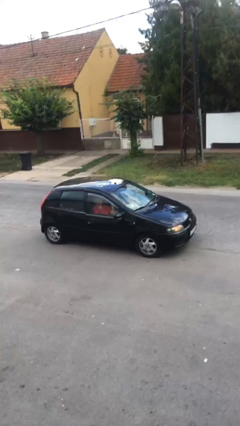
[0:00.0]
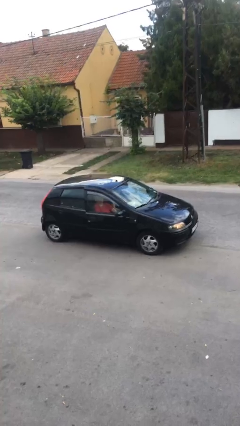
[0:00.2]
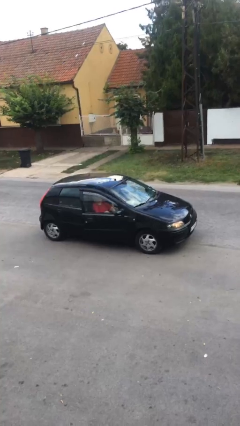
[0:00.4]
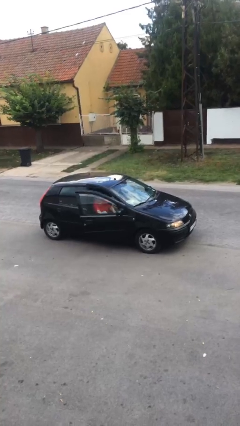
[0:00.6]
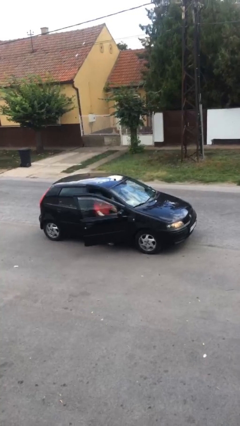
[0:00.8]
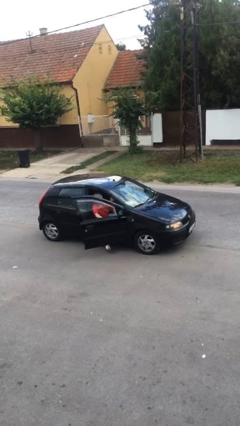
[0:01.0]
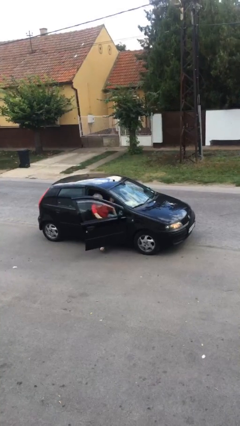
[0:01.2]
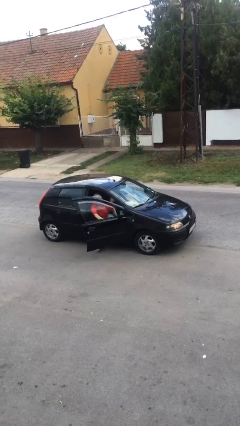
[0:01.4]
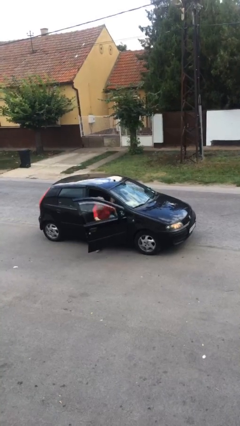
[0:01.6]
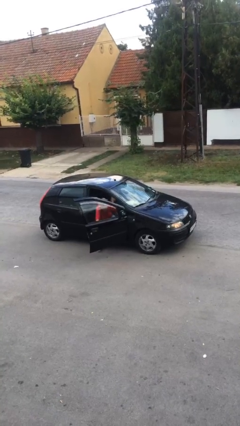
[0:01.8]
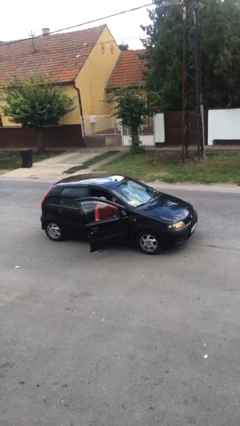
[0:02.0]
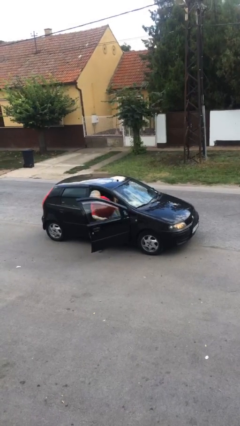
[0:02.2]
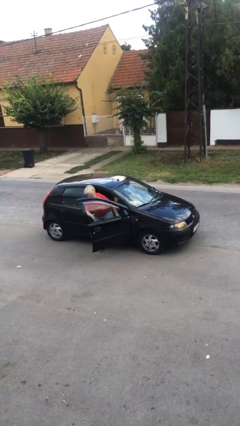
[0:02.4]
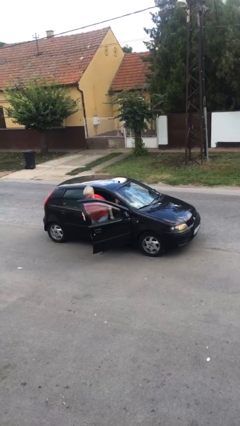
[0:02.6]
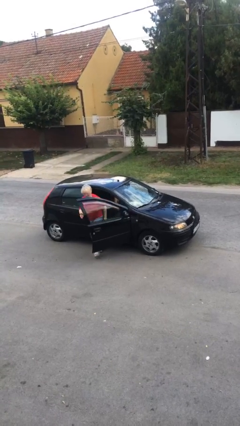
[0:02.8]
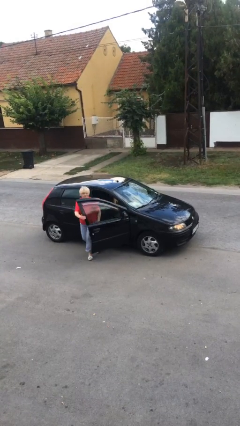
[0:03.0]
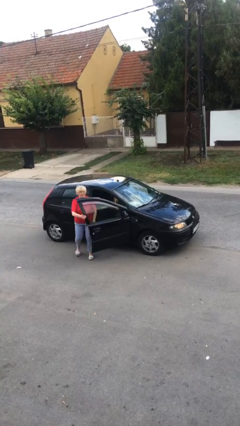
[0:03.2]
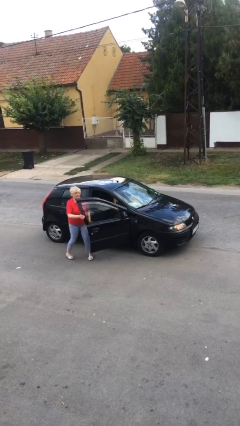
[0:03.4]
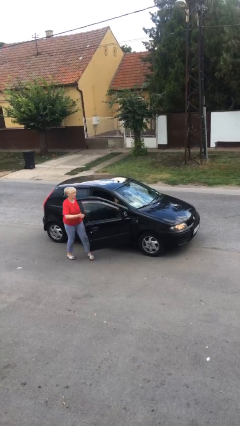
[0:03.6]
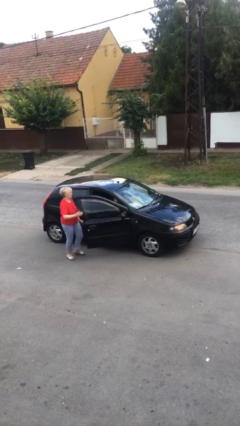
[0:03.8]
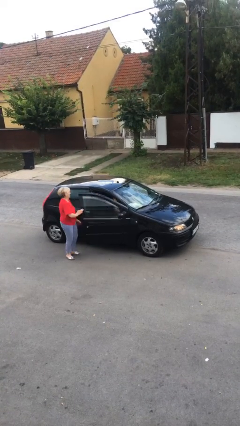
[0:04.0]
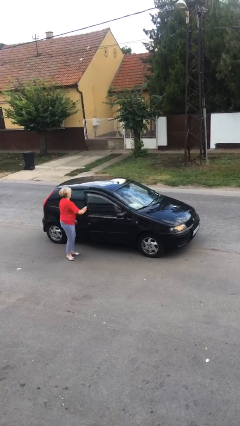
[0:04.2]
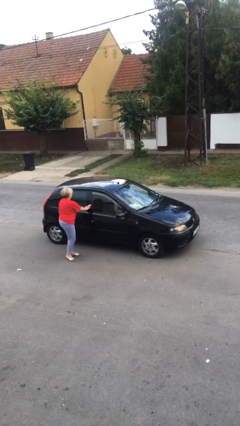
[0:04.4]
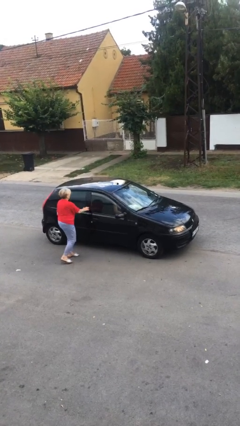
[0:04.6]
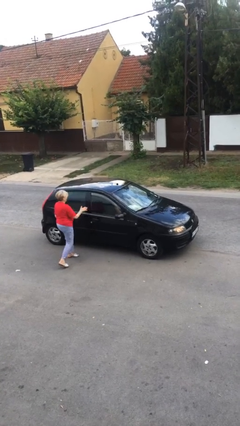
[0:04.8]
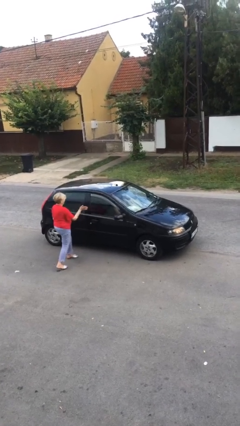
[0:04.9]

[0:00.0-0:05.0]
car drops off person

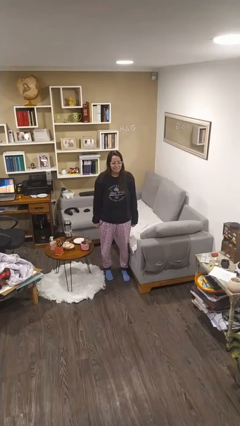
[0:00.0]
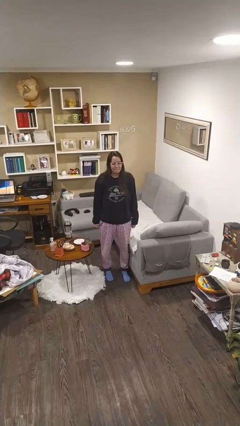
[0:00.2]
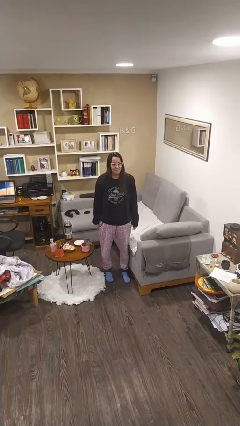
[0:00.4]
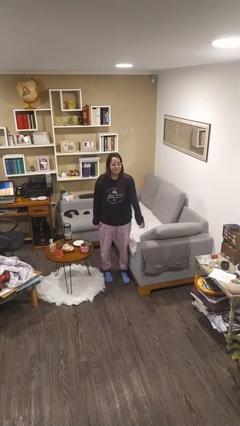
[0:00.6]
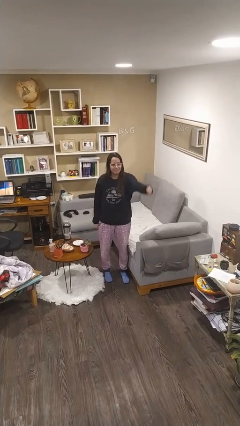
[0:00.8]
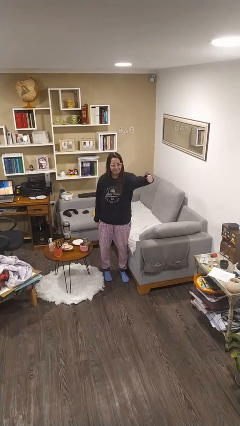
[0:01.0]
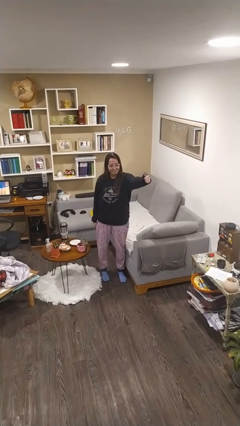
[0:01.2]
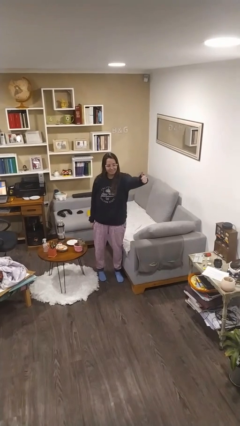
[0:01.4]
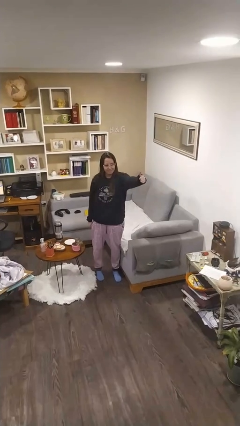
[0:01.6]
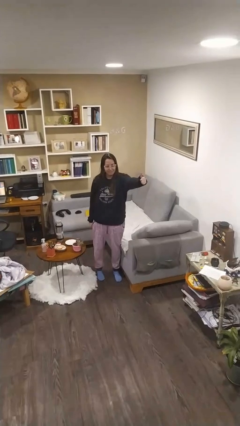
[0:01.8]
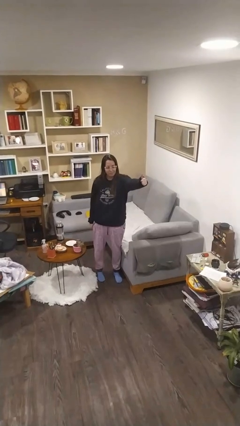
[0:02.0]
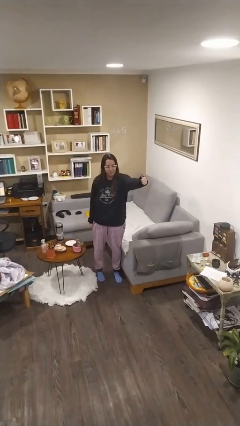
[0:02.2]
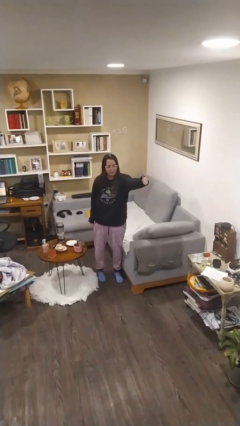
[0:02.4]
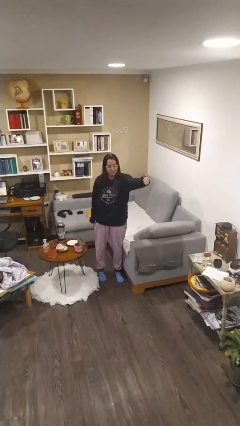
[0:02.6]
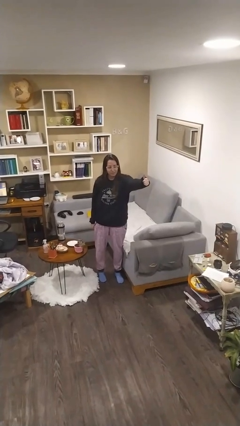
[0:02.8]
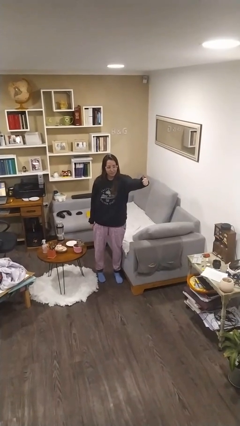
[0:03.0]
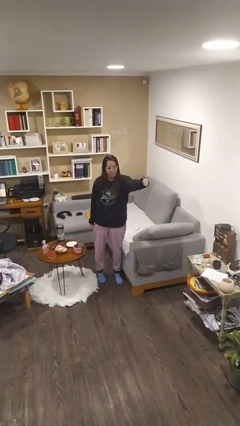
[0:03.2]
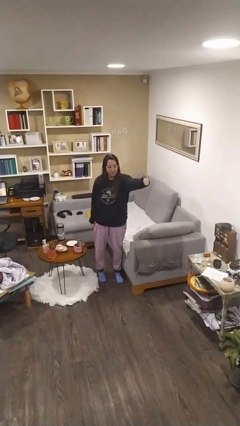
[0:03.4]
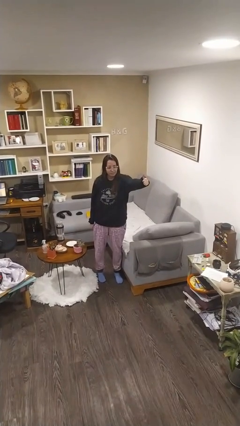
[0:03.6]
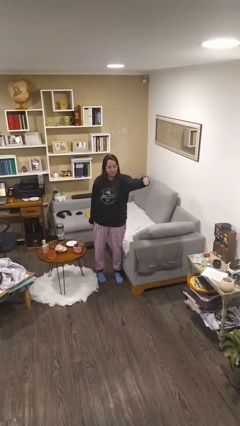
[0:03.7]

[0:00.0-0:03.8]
person gestures thumbs up

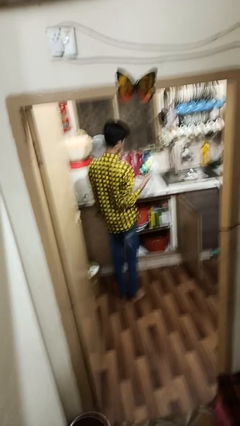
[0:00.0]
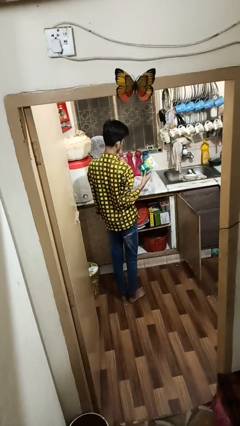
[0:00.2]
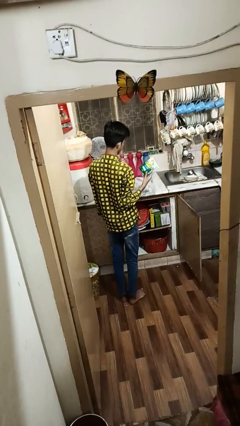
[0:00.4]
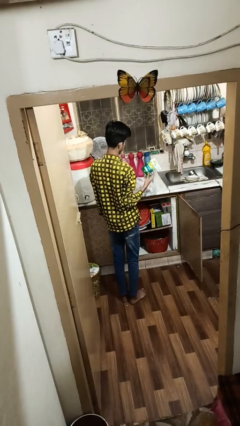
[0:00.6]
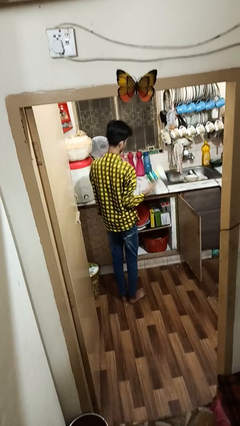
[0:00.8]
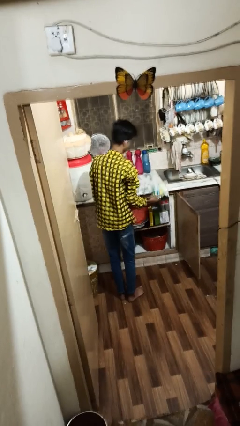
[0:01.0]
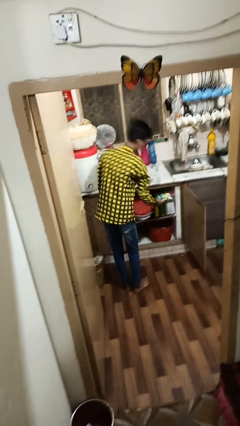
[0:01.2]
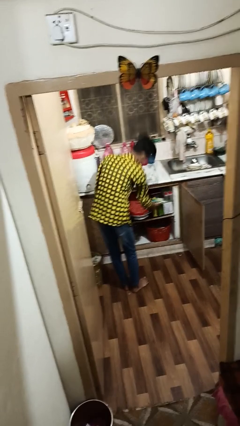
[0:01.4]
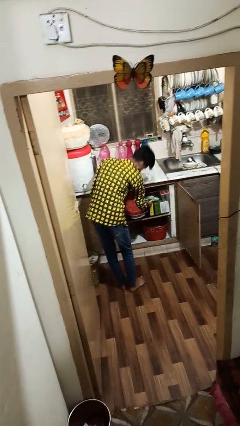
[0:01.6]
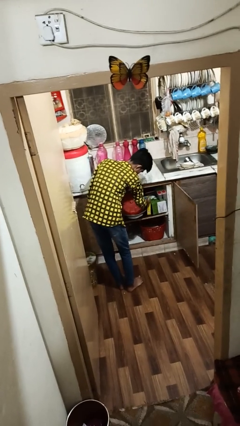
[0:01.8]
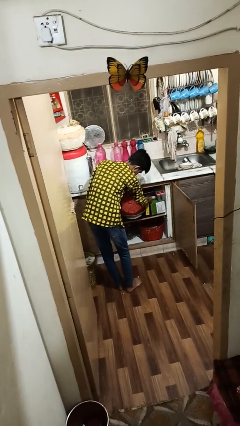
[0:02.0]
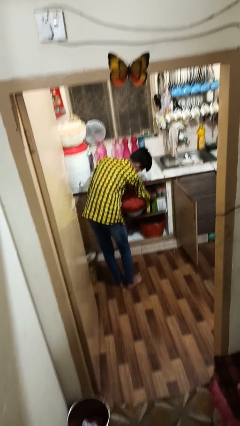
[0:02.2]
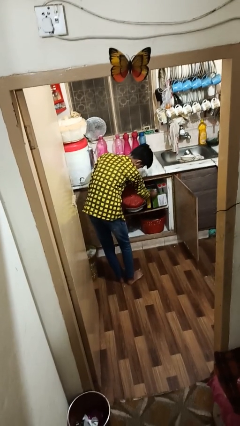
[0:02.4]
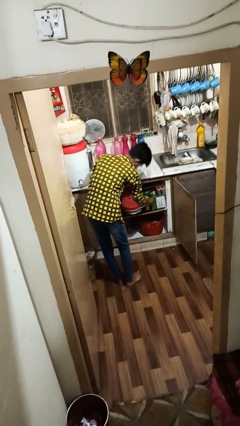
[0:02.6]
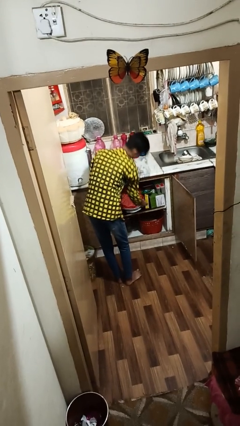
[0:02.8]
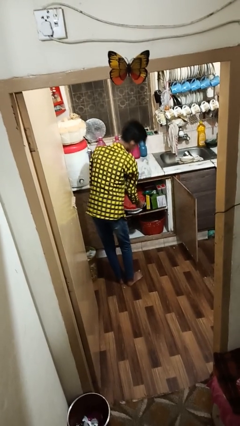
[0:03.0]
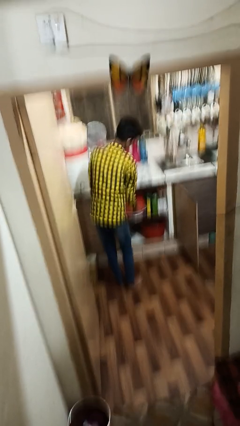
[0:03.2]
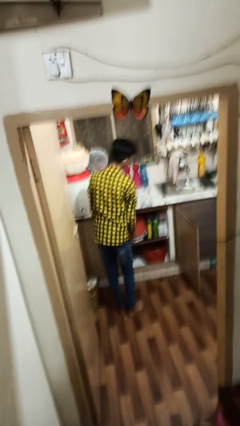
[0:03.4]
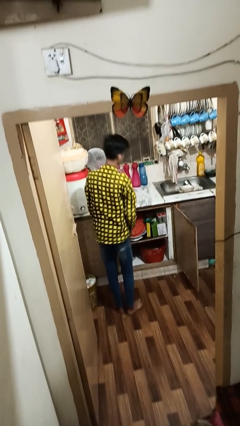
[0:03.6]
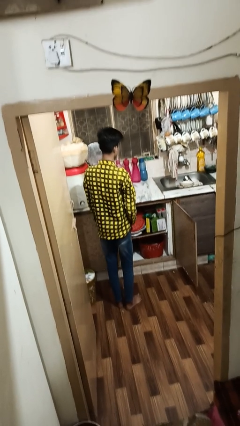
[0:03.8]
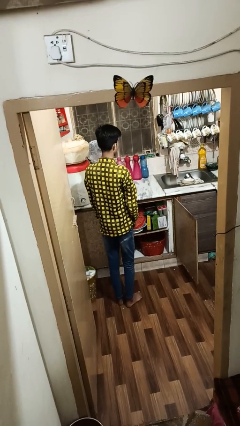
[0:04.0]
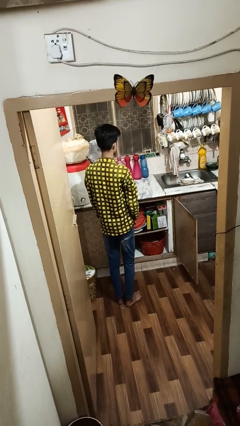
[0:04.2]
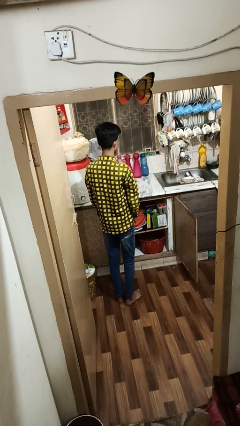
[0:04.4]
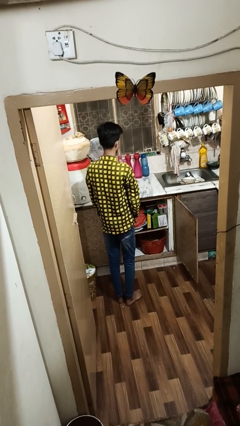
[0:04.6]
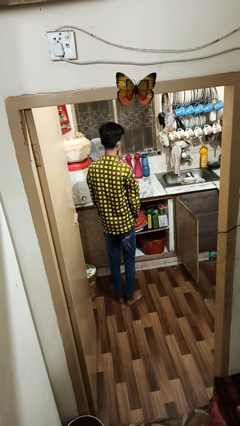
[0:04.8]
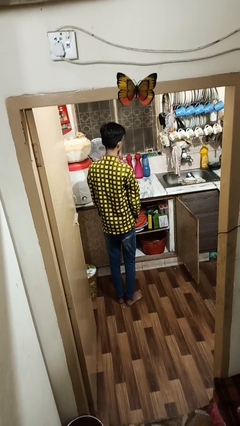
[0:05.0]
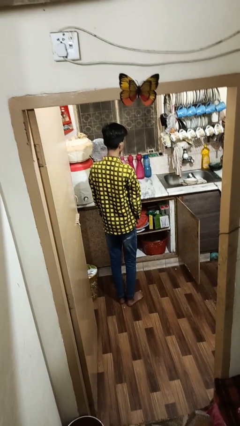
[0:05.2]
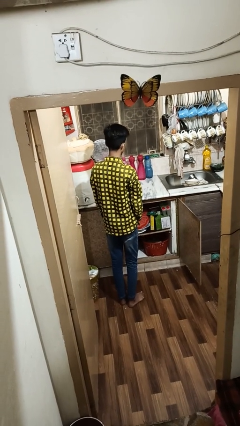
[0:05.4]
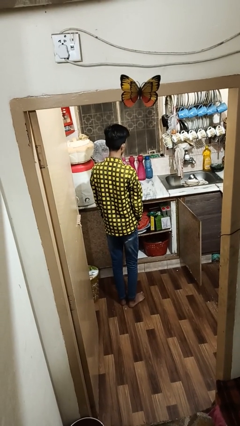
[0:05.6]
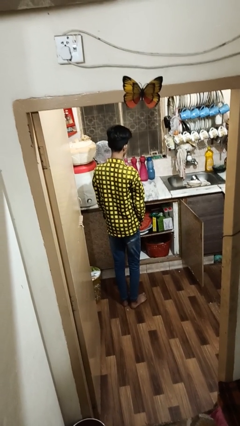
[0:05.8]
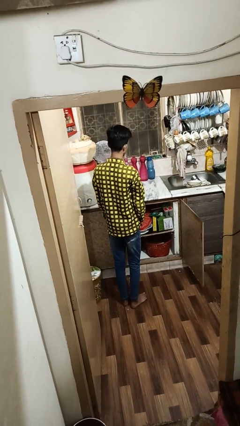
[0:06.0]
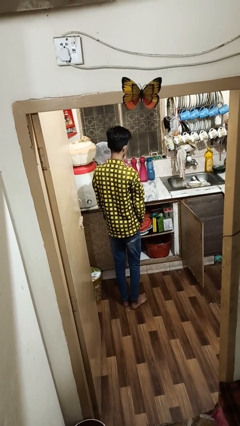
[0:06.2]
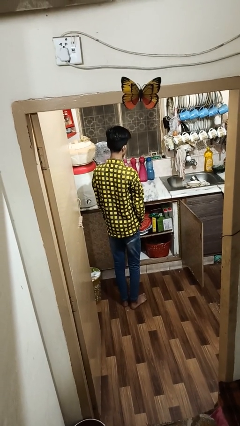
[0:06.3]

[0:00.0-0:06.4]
person puts object in cabinet

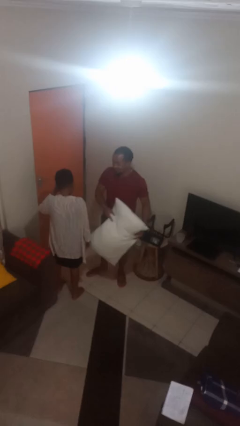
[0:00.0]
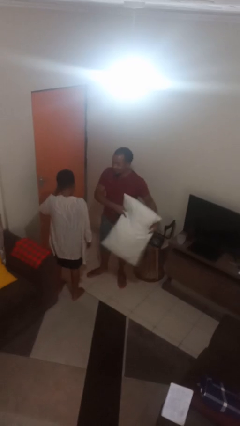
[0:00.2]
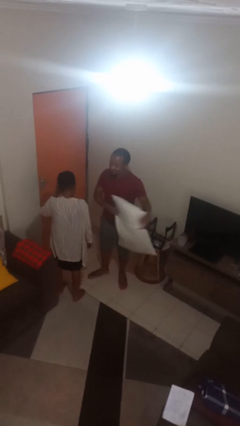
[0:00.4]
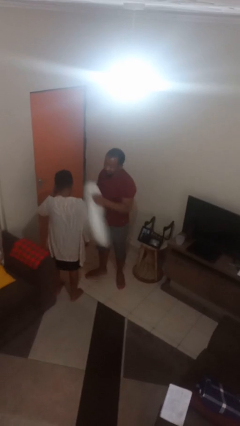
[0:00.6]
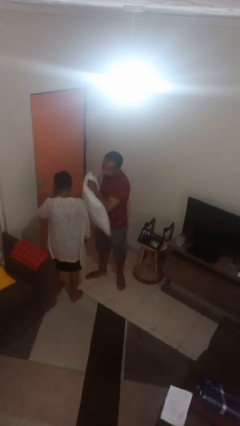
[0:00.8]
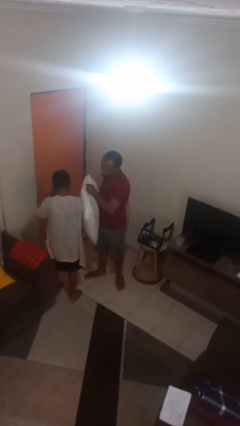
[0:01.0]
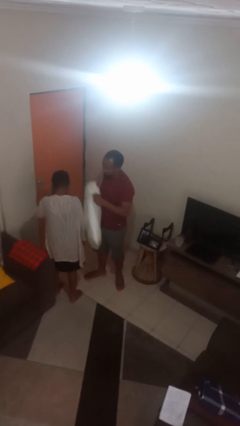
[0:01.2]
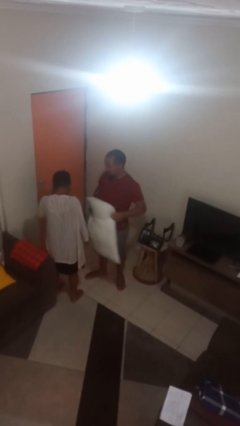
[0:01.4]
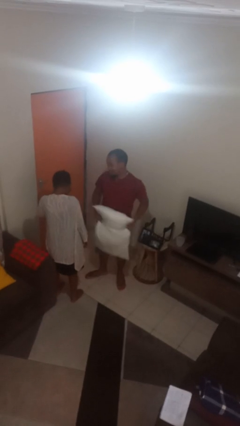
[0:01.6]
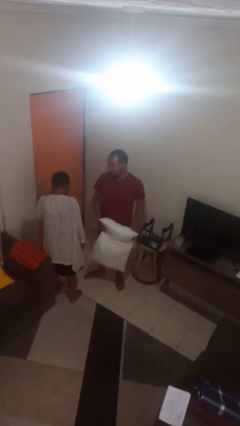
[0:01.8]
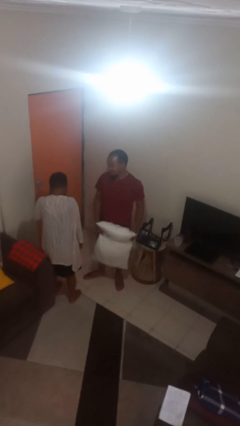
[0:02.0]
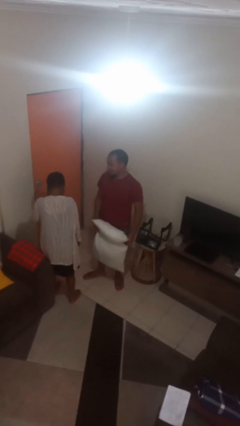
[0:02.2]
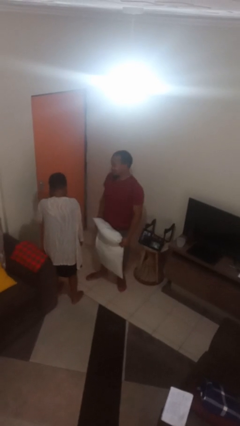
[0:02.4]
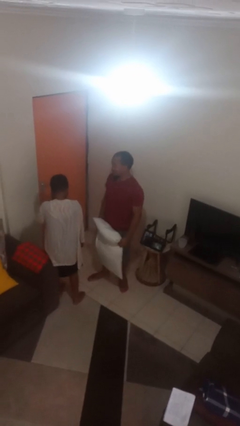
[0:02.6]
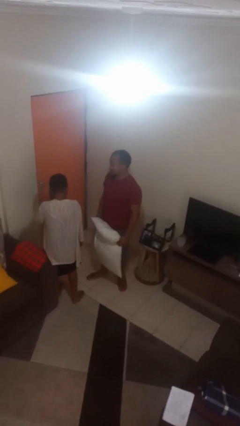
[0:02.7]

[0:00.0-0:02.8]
person hits person with pillow
